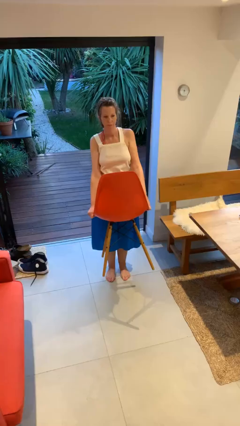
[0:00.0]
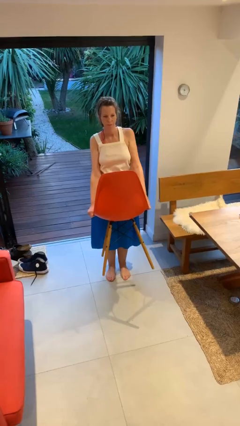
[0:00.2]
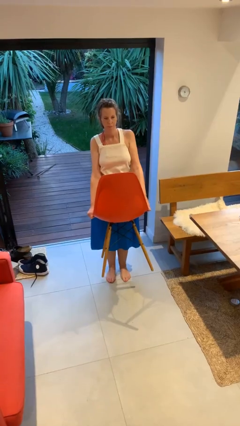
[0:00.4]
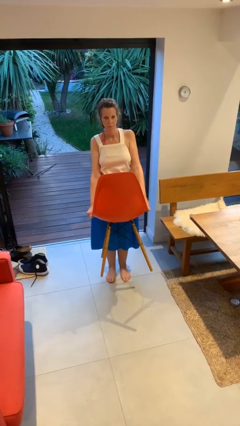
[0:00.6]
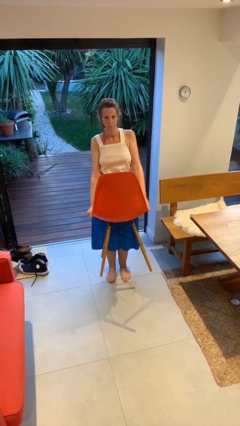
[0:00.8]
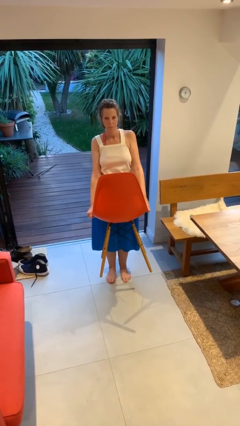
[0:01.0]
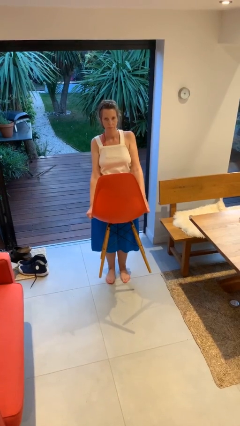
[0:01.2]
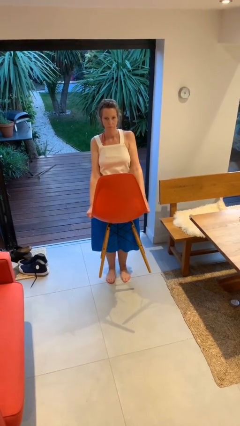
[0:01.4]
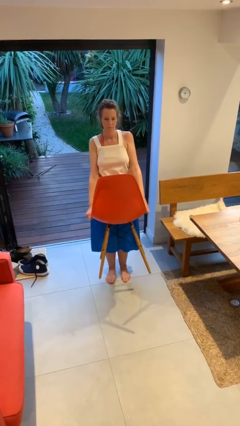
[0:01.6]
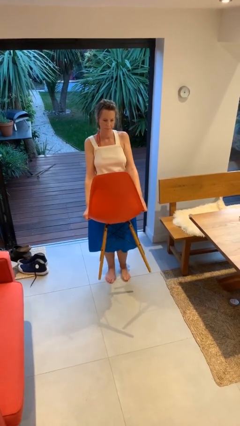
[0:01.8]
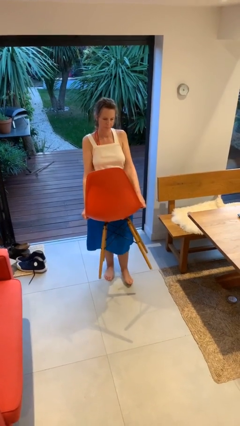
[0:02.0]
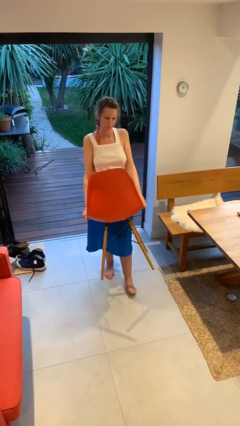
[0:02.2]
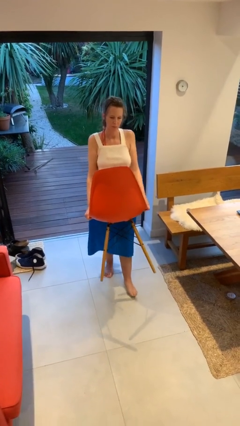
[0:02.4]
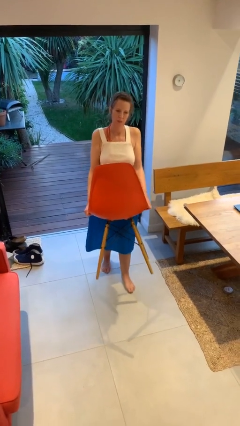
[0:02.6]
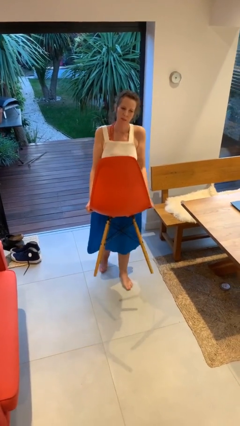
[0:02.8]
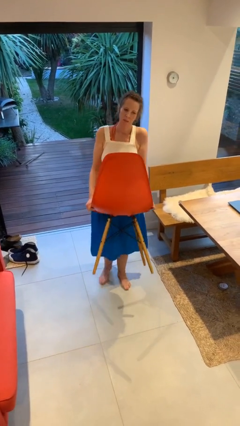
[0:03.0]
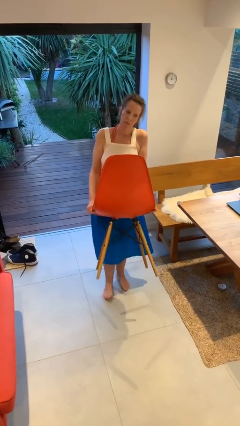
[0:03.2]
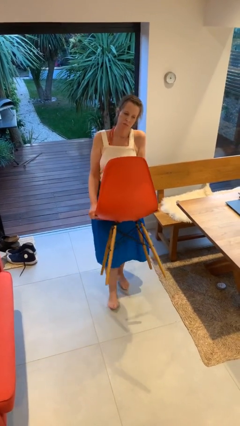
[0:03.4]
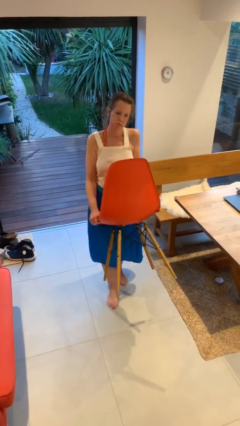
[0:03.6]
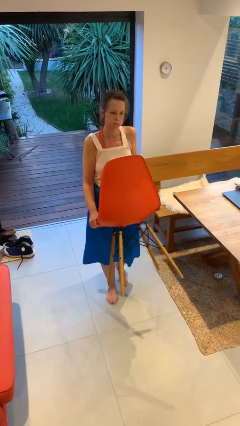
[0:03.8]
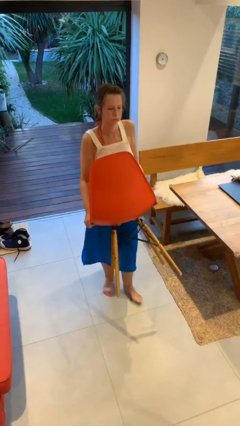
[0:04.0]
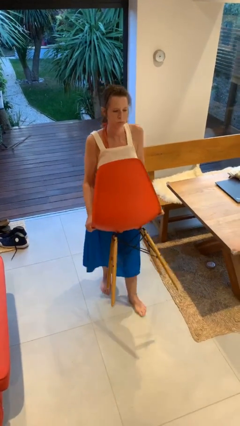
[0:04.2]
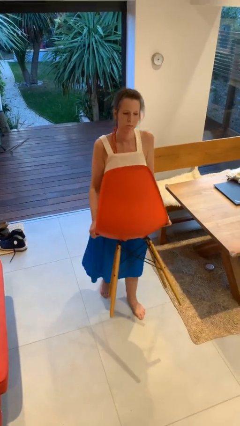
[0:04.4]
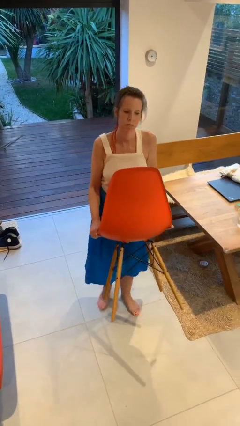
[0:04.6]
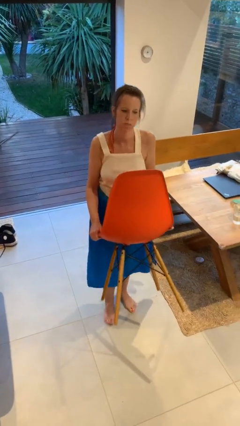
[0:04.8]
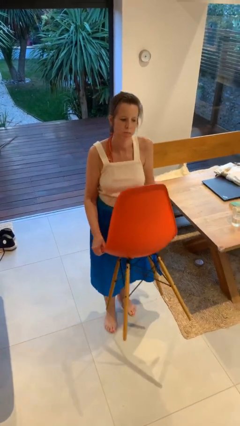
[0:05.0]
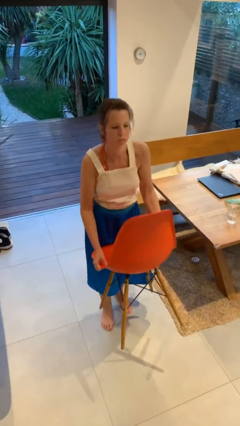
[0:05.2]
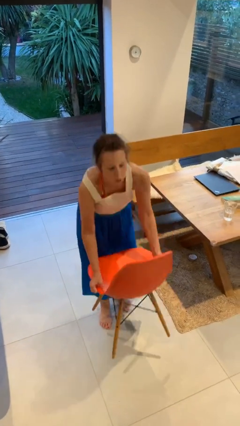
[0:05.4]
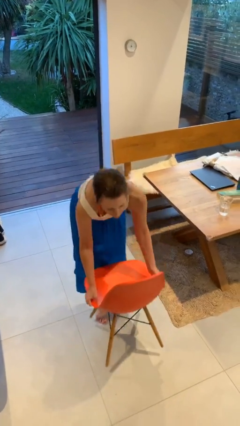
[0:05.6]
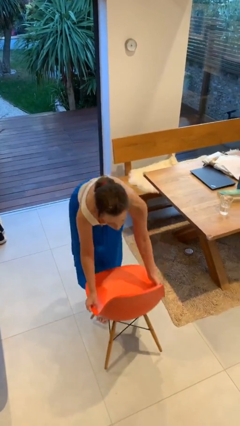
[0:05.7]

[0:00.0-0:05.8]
person carries heavy object

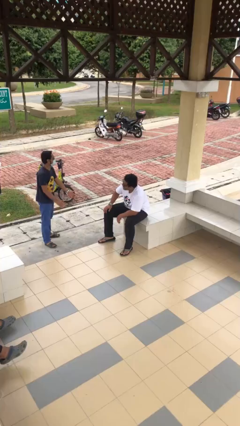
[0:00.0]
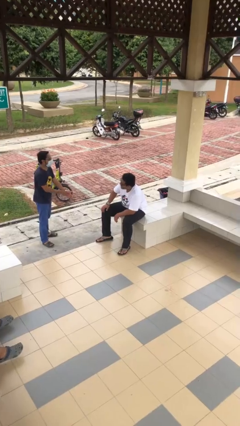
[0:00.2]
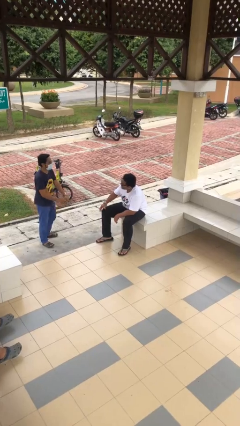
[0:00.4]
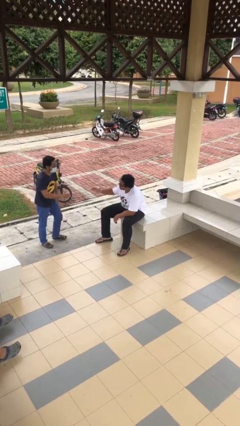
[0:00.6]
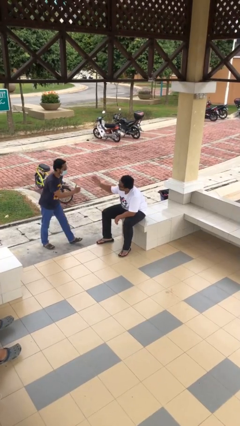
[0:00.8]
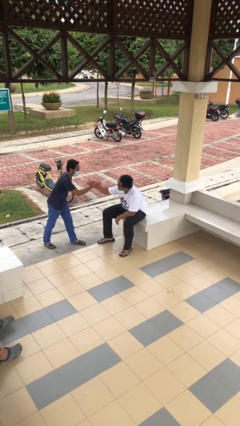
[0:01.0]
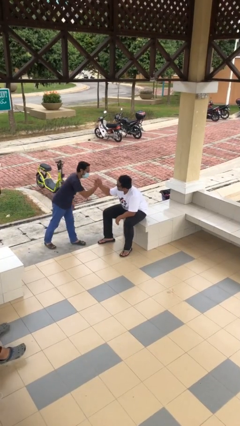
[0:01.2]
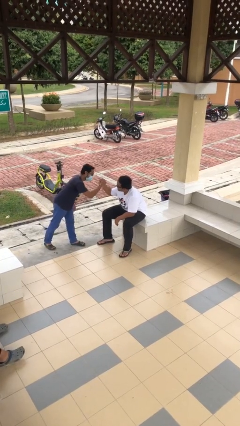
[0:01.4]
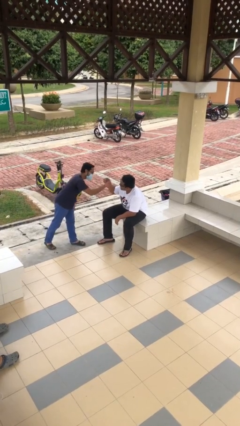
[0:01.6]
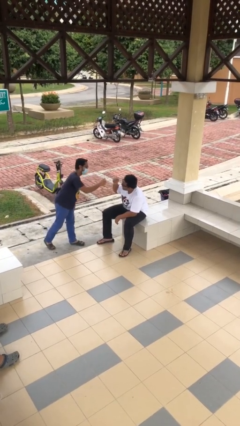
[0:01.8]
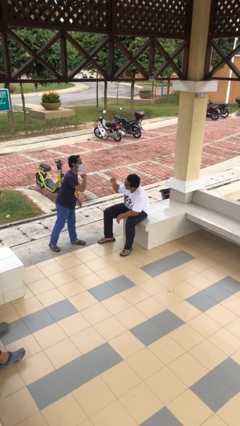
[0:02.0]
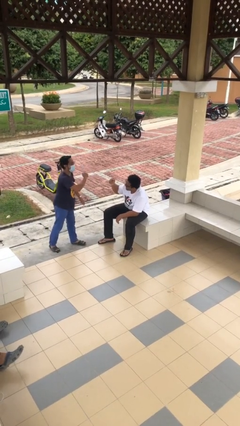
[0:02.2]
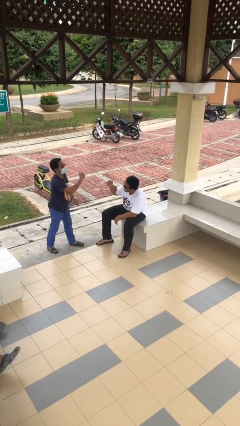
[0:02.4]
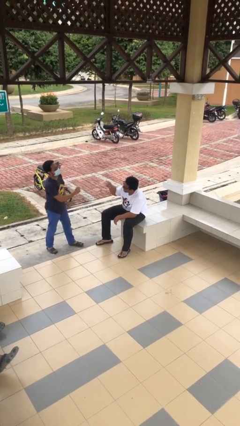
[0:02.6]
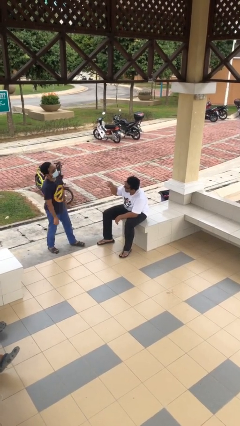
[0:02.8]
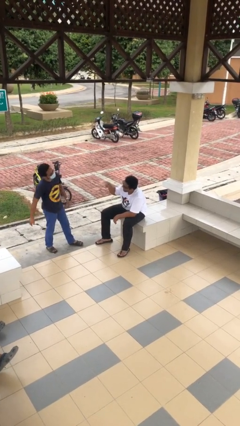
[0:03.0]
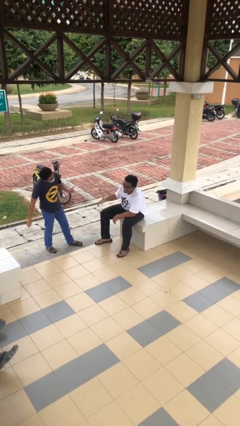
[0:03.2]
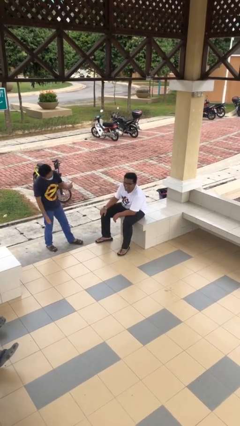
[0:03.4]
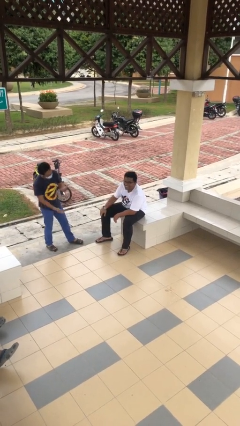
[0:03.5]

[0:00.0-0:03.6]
person shakes hand

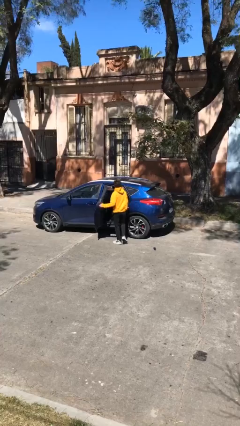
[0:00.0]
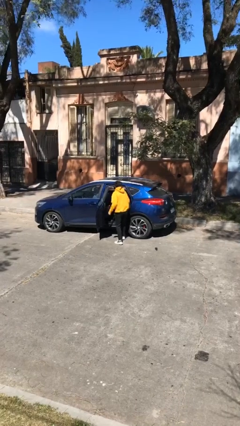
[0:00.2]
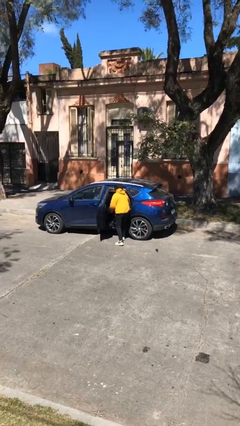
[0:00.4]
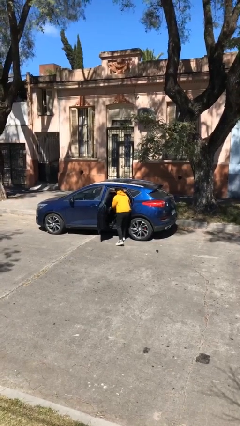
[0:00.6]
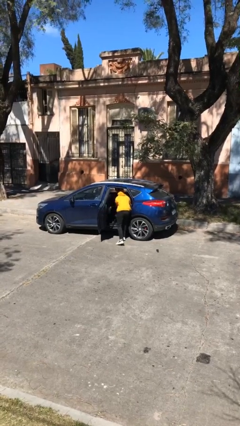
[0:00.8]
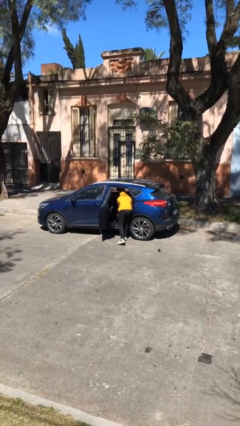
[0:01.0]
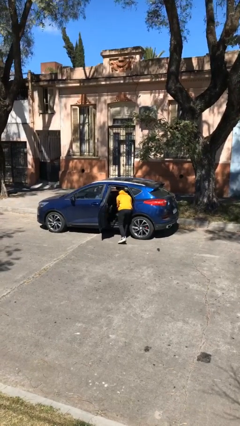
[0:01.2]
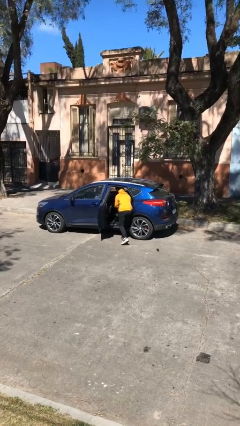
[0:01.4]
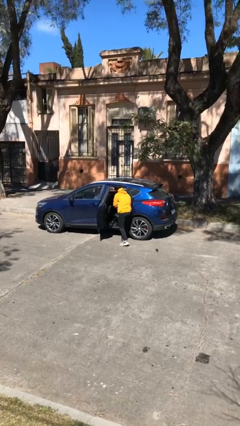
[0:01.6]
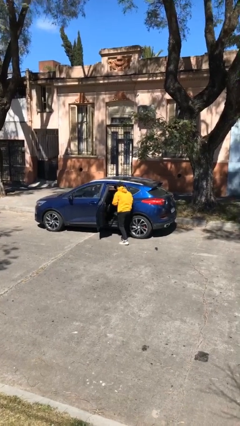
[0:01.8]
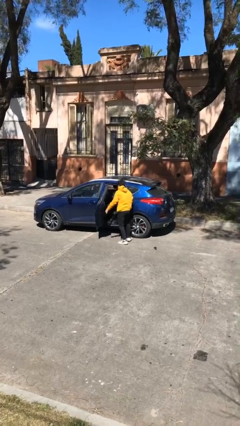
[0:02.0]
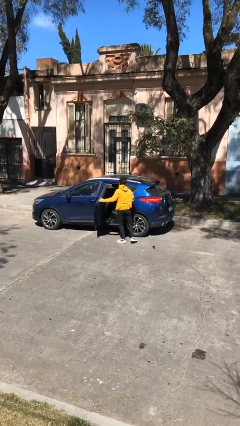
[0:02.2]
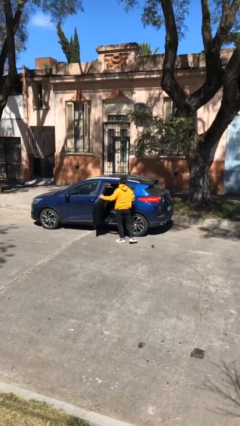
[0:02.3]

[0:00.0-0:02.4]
person unloads car

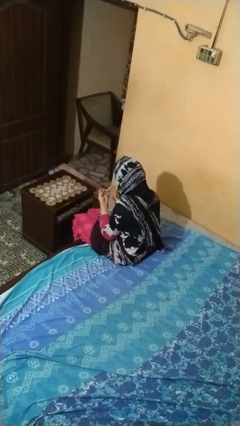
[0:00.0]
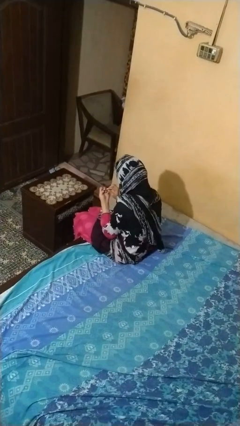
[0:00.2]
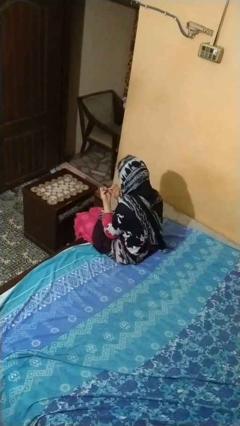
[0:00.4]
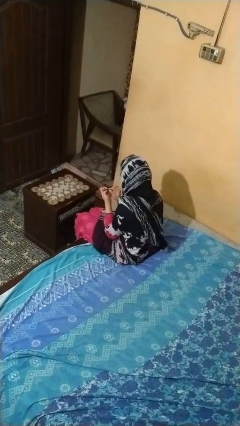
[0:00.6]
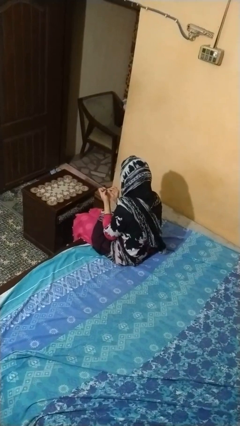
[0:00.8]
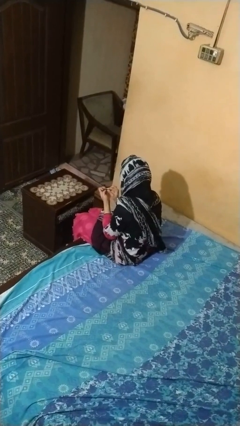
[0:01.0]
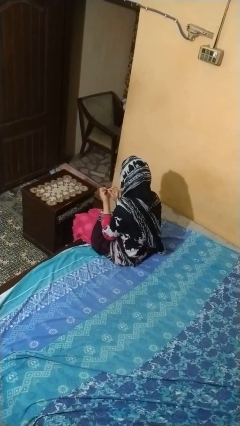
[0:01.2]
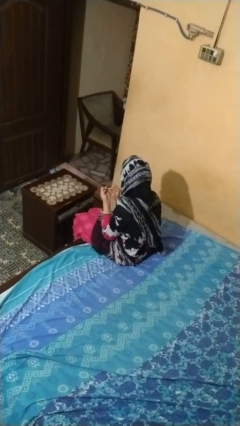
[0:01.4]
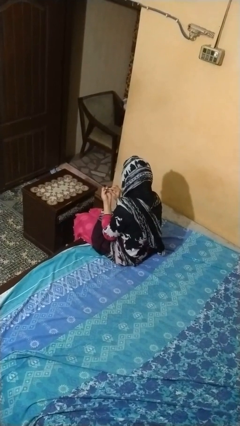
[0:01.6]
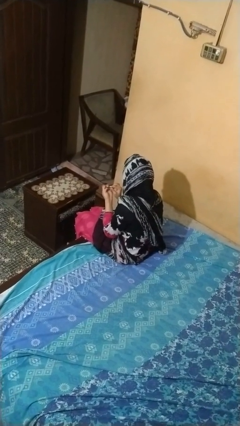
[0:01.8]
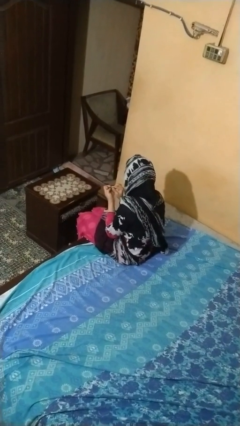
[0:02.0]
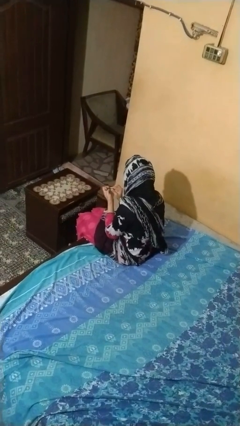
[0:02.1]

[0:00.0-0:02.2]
person files fingernails

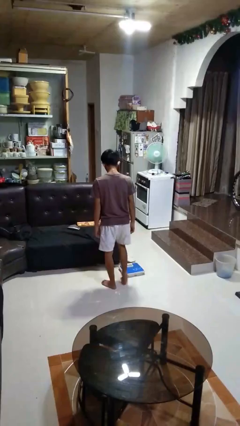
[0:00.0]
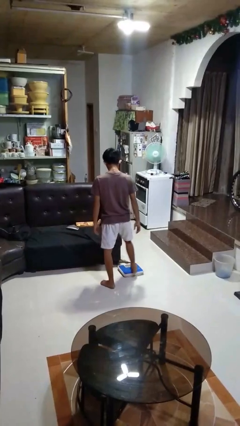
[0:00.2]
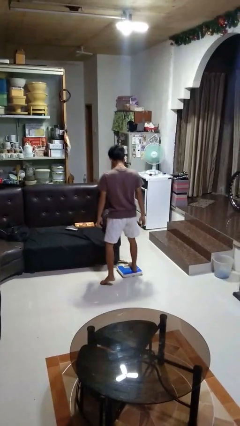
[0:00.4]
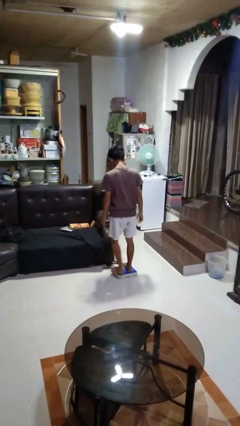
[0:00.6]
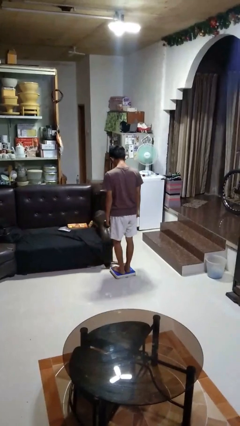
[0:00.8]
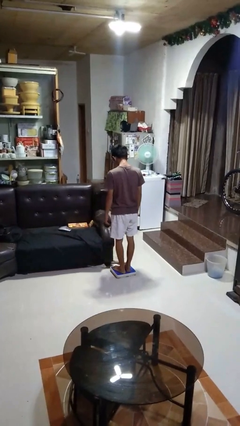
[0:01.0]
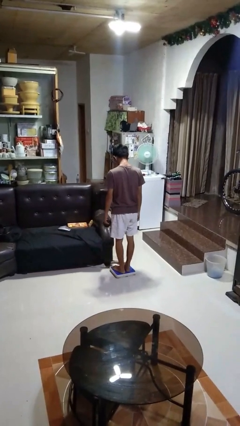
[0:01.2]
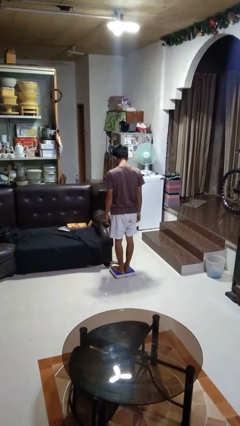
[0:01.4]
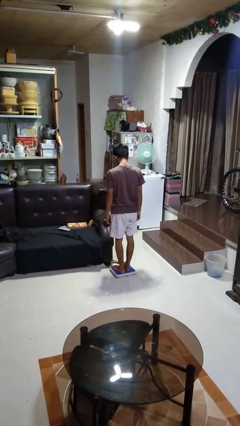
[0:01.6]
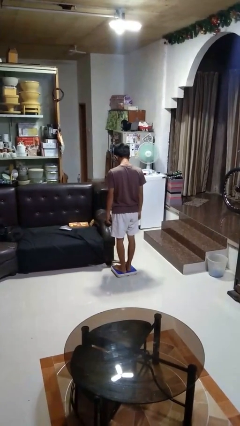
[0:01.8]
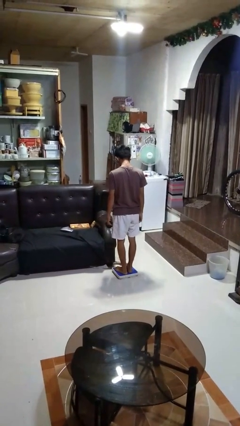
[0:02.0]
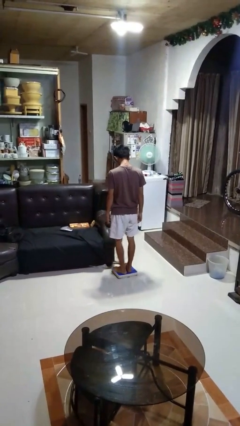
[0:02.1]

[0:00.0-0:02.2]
person uses bodyweight scale

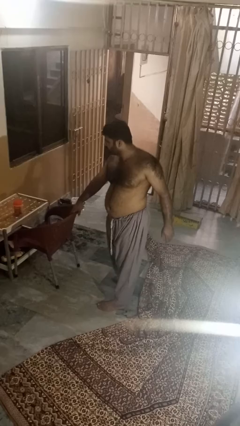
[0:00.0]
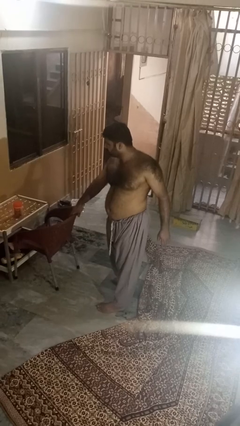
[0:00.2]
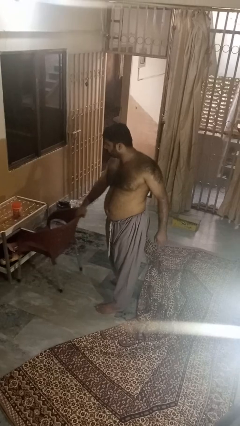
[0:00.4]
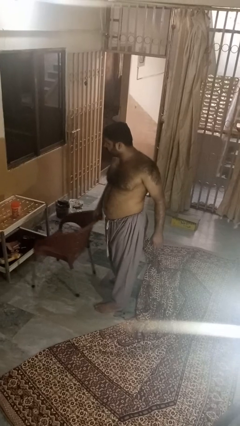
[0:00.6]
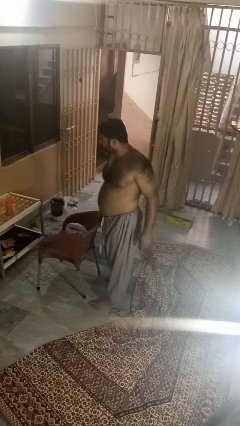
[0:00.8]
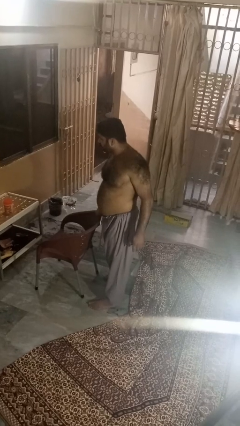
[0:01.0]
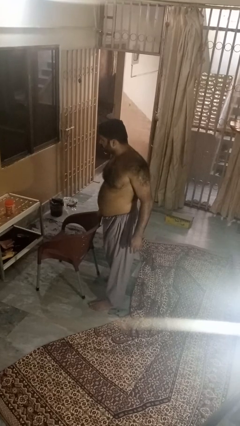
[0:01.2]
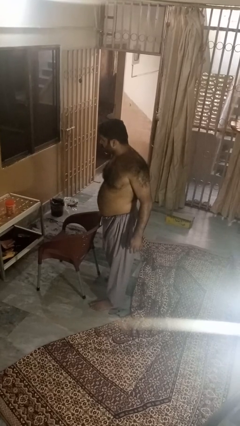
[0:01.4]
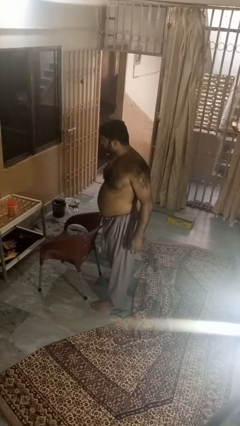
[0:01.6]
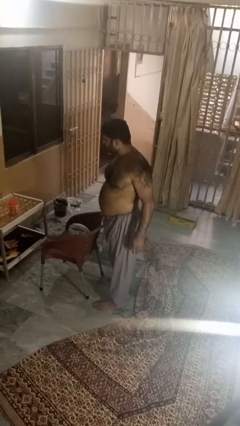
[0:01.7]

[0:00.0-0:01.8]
person pulls out chair
